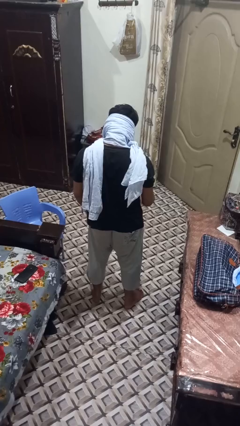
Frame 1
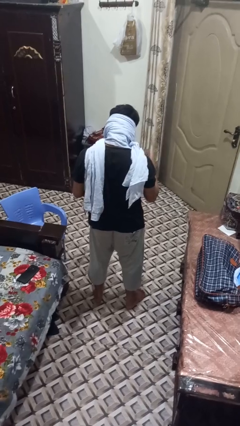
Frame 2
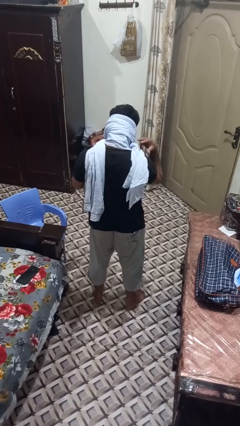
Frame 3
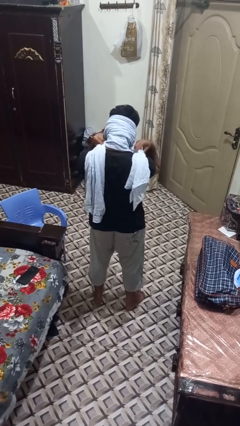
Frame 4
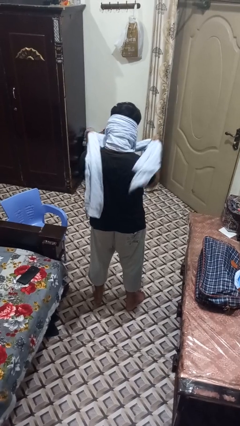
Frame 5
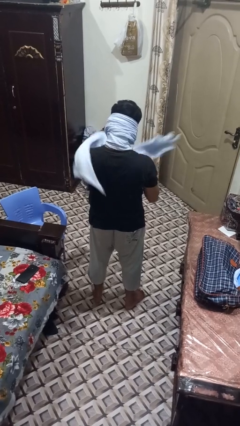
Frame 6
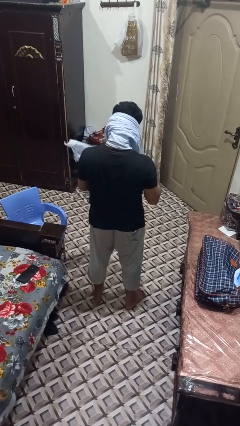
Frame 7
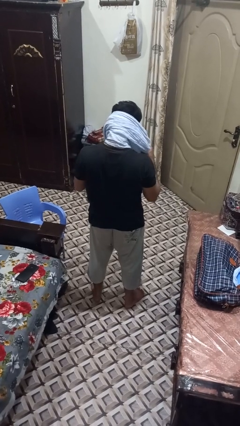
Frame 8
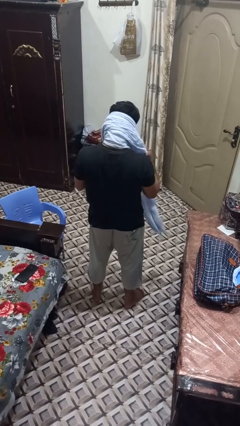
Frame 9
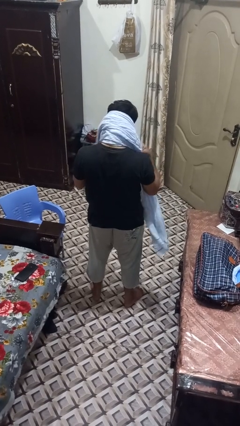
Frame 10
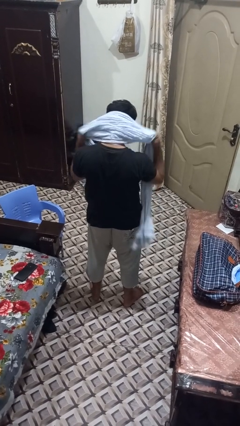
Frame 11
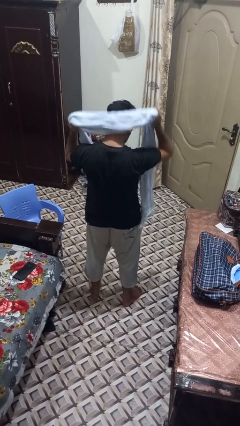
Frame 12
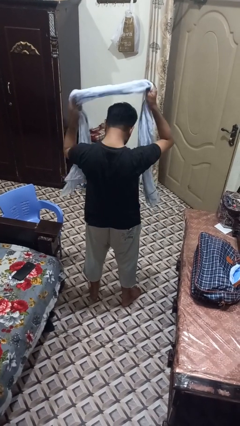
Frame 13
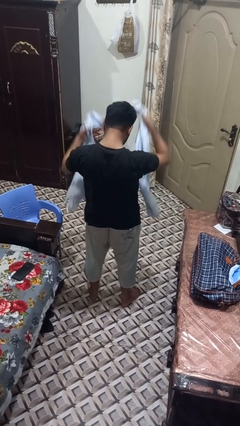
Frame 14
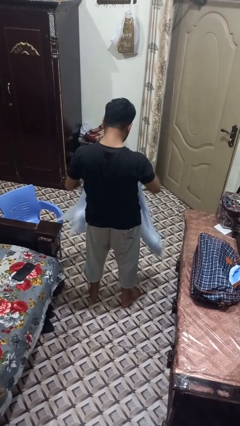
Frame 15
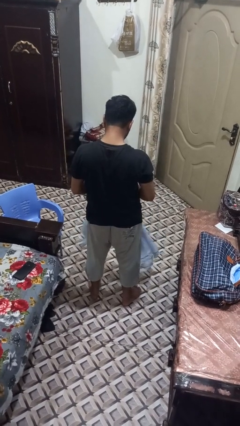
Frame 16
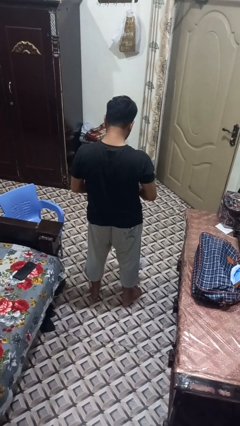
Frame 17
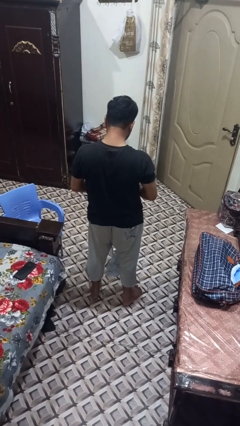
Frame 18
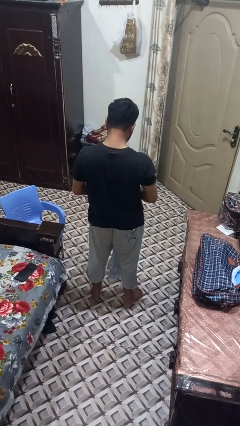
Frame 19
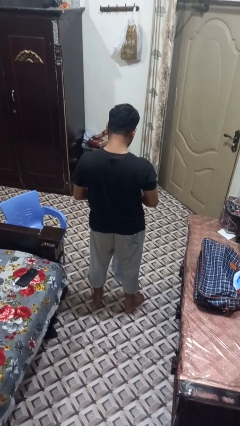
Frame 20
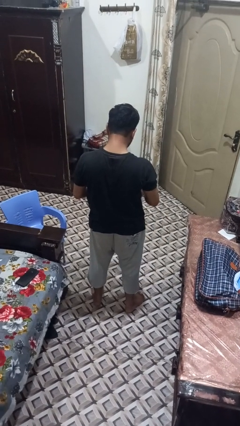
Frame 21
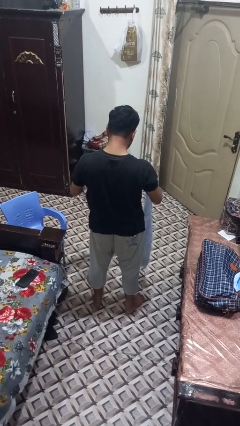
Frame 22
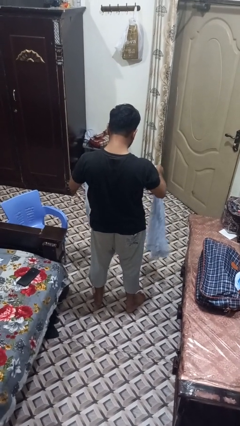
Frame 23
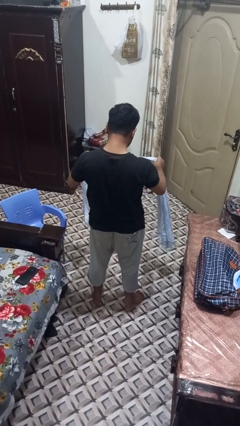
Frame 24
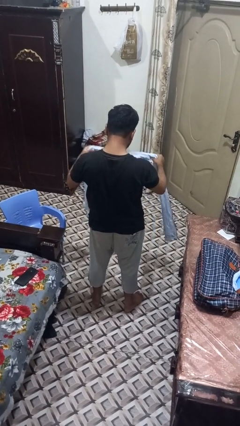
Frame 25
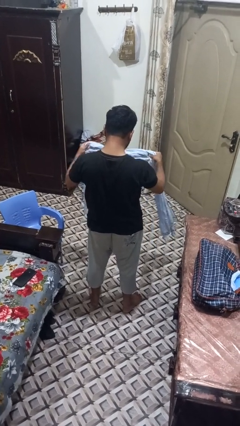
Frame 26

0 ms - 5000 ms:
person takes off scarf

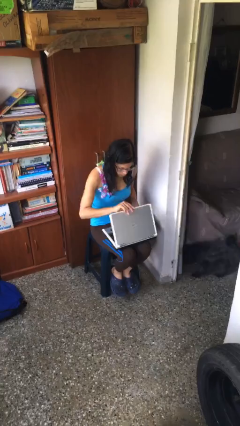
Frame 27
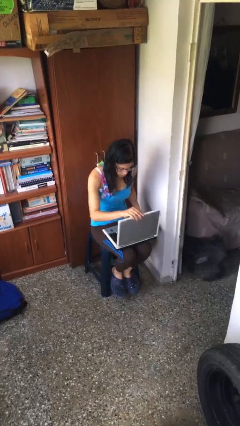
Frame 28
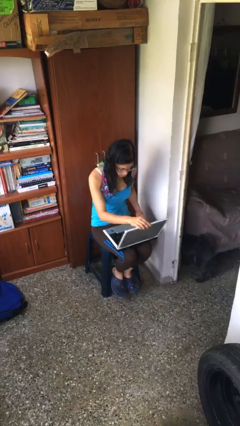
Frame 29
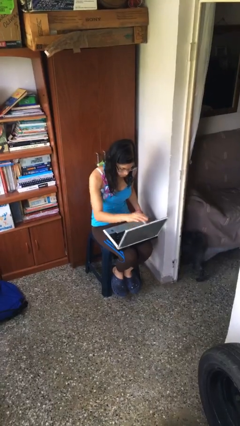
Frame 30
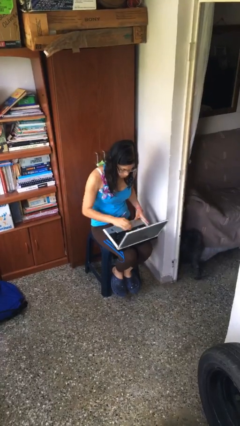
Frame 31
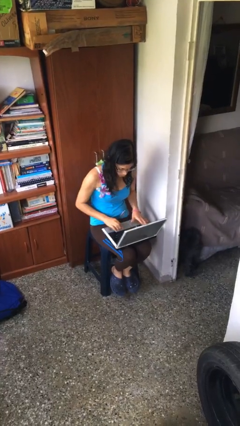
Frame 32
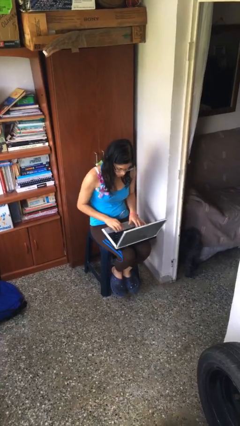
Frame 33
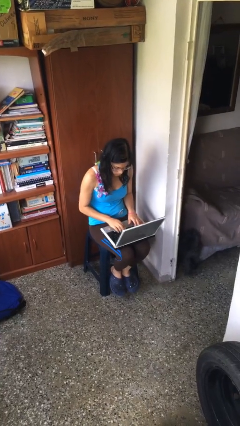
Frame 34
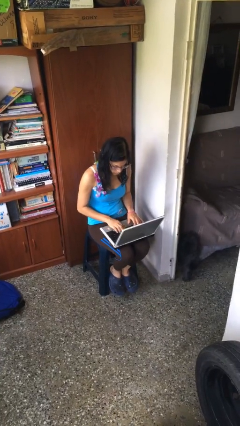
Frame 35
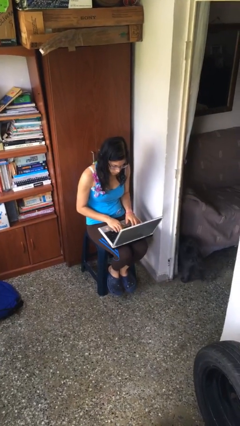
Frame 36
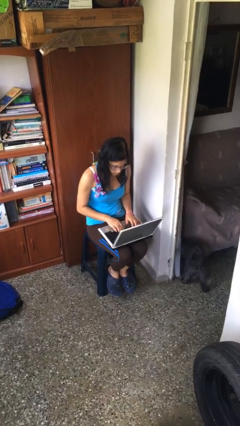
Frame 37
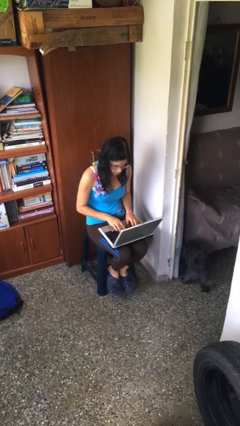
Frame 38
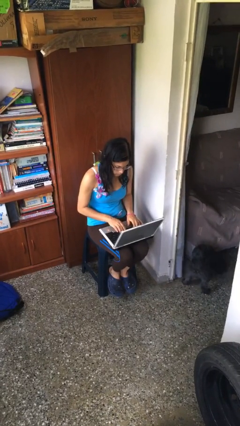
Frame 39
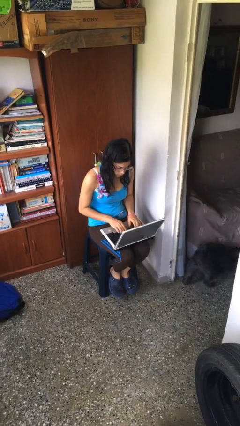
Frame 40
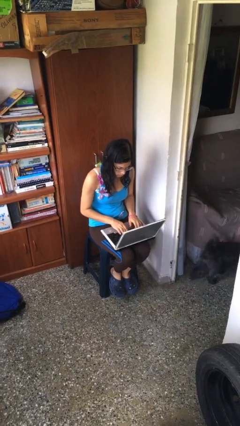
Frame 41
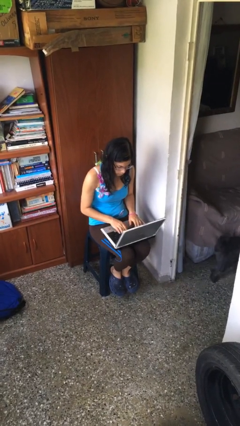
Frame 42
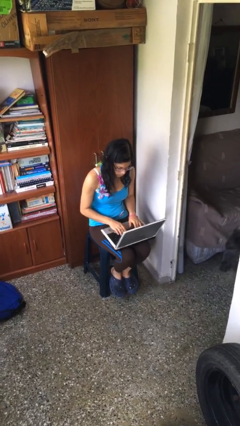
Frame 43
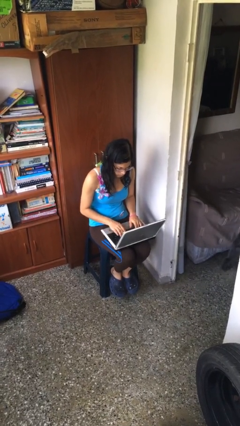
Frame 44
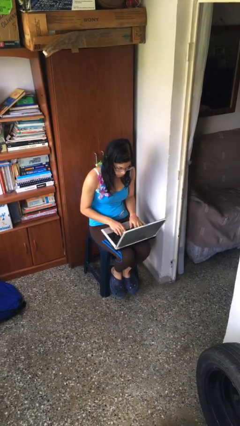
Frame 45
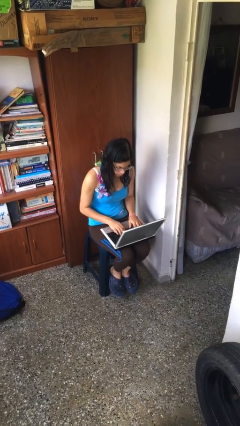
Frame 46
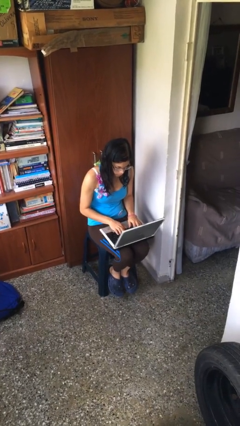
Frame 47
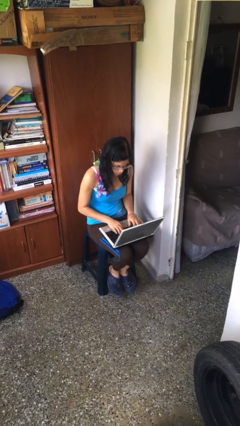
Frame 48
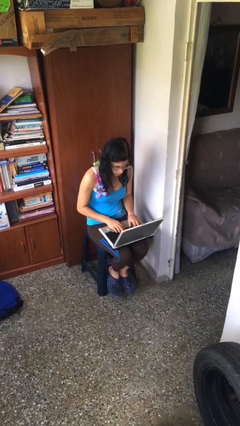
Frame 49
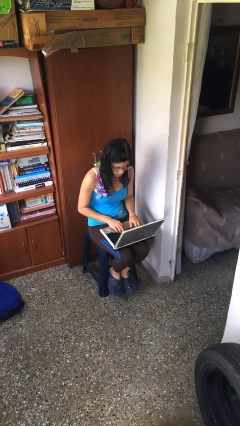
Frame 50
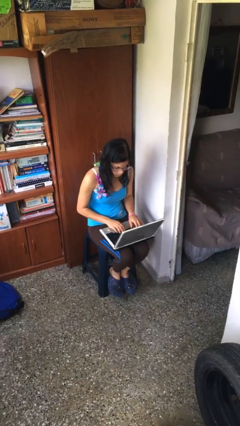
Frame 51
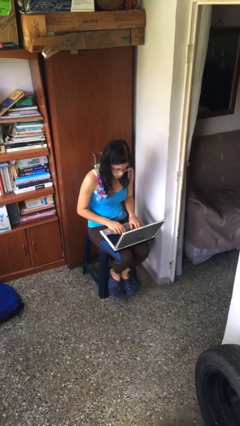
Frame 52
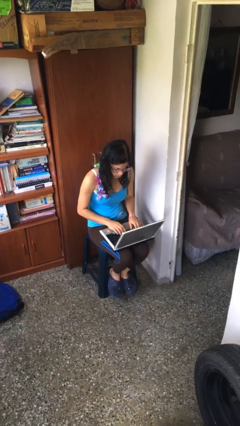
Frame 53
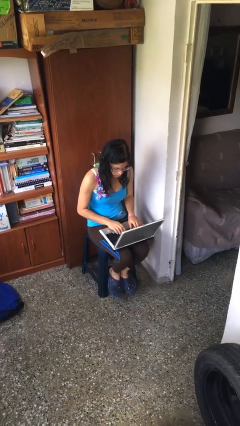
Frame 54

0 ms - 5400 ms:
person interacts with laptop

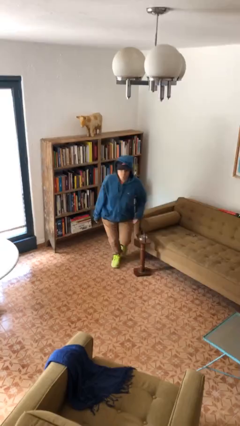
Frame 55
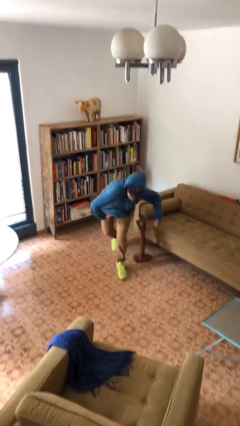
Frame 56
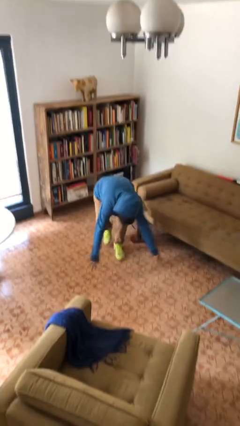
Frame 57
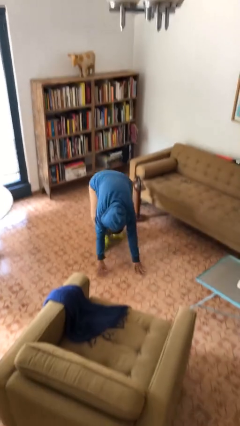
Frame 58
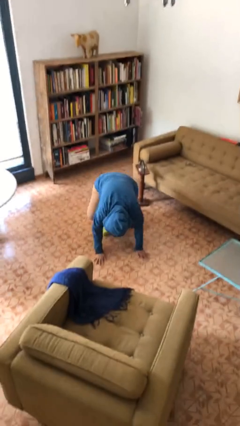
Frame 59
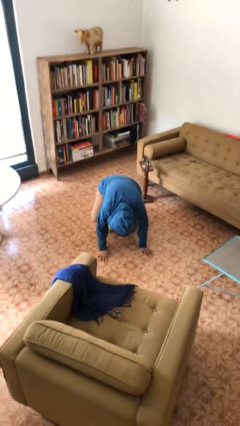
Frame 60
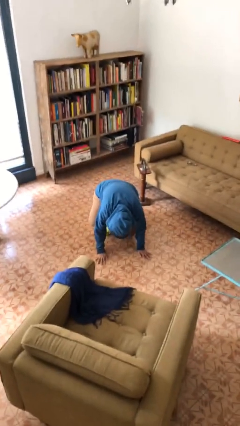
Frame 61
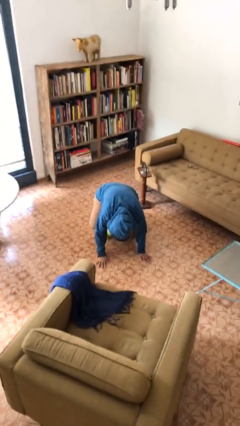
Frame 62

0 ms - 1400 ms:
person trips on object on floor

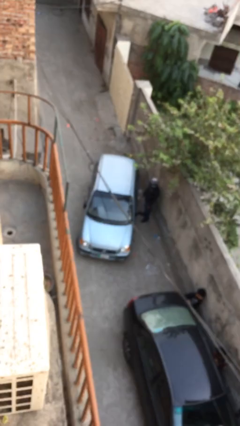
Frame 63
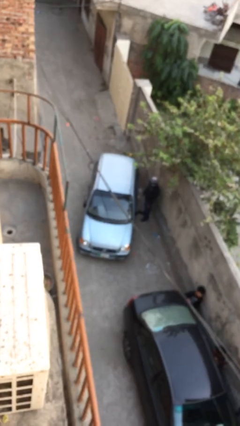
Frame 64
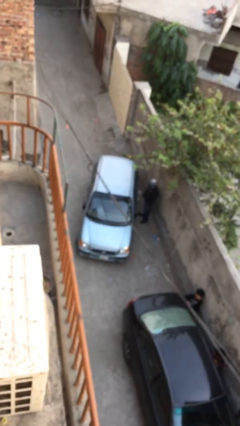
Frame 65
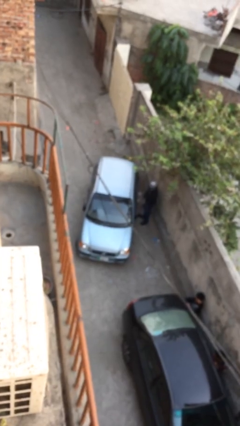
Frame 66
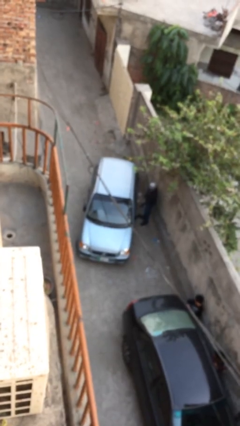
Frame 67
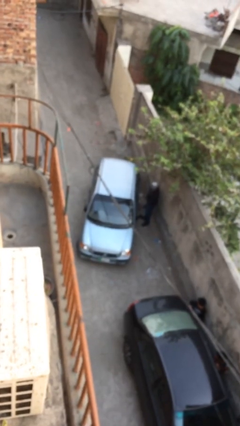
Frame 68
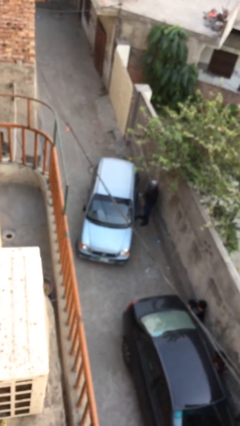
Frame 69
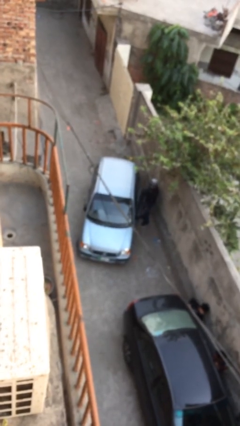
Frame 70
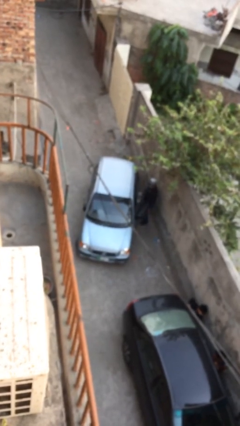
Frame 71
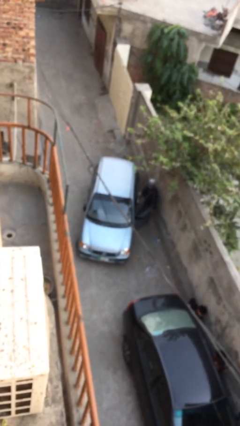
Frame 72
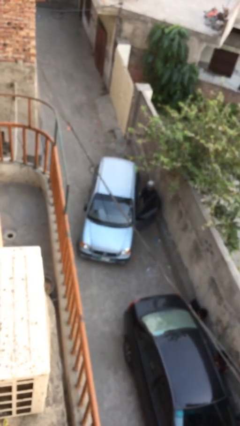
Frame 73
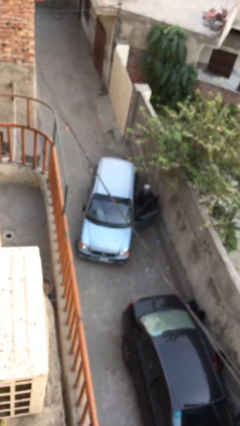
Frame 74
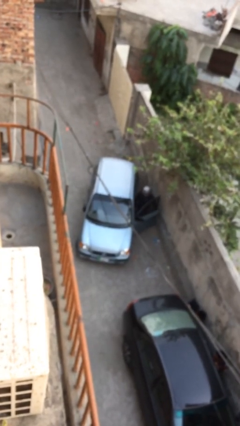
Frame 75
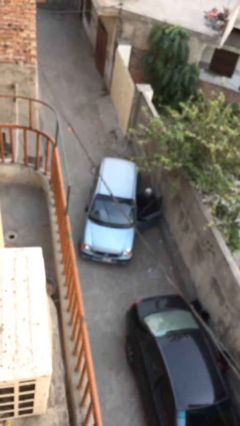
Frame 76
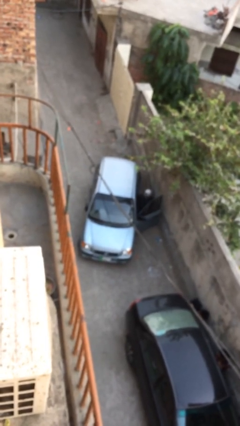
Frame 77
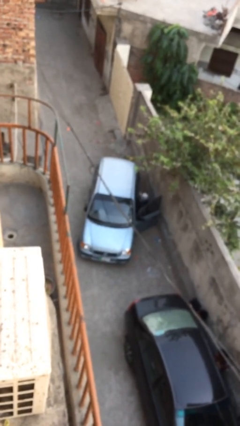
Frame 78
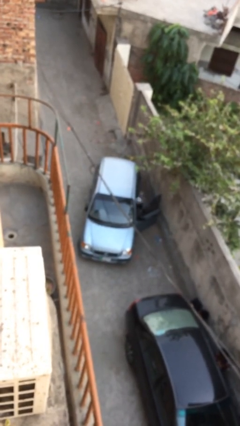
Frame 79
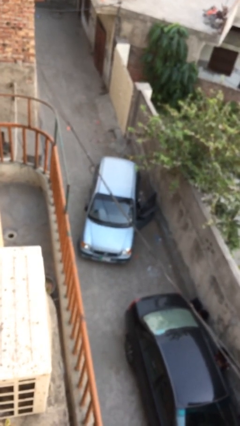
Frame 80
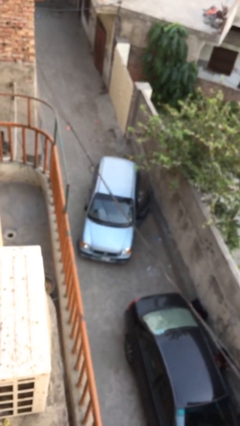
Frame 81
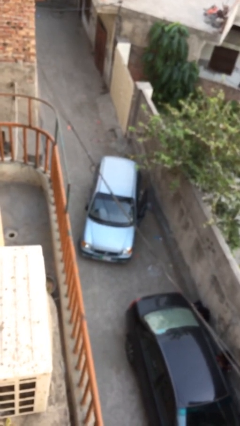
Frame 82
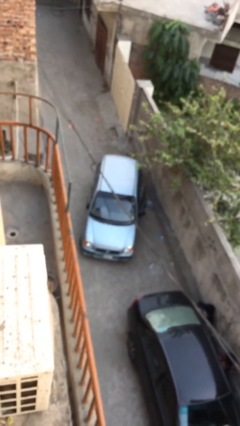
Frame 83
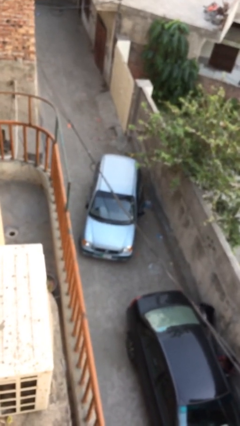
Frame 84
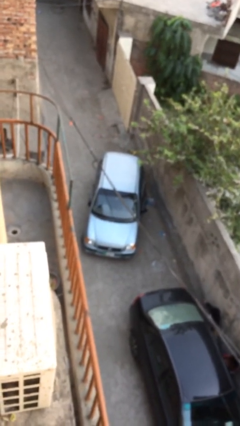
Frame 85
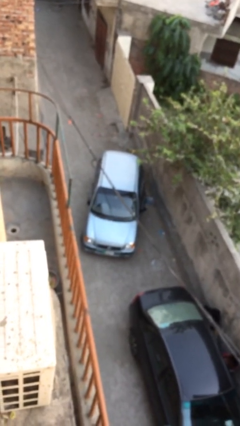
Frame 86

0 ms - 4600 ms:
car picks up person

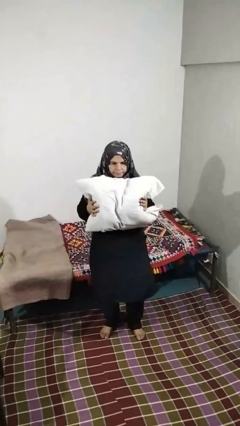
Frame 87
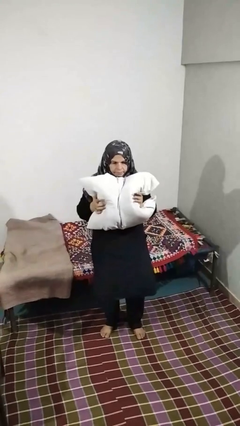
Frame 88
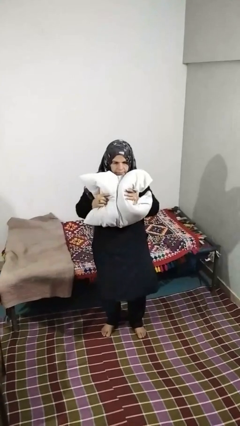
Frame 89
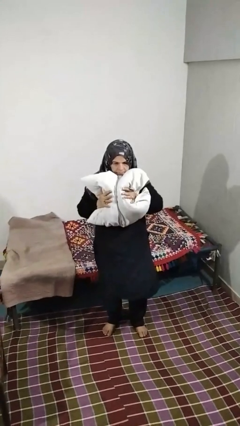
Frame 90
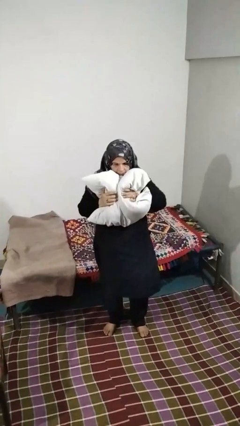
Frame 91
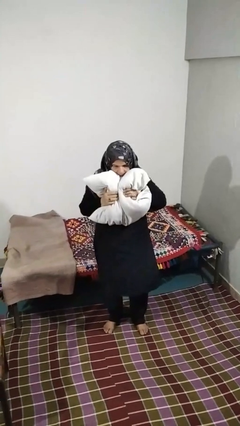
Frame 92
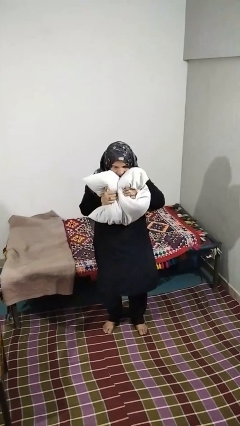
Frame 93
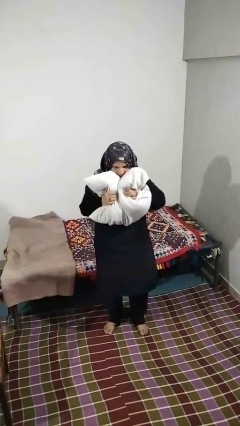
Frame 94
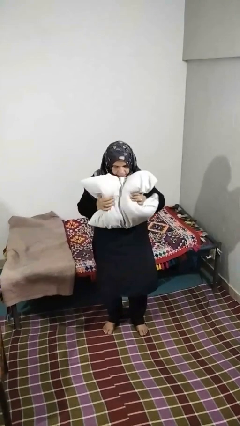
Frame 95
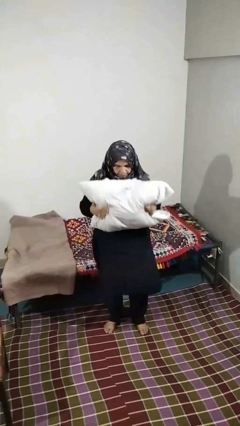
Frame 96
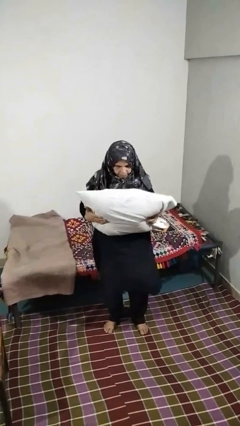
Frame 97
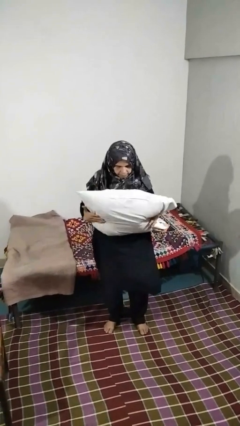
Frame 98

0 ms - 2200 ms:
person squeezes object
